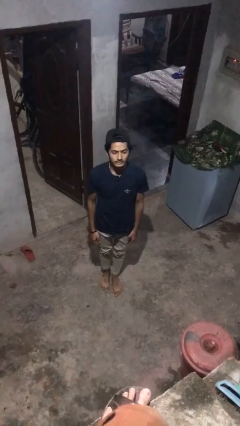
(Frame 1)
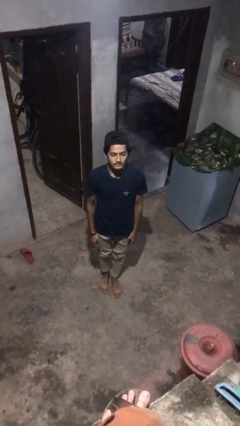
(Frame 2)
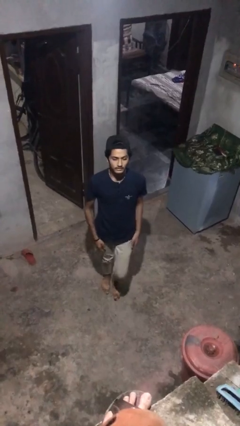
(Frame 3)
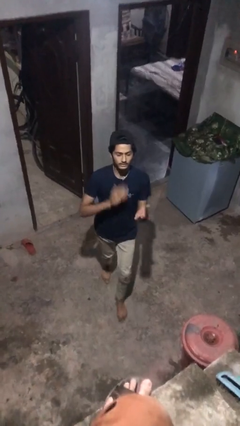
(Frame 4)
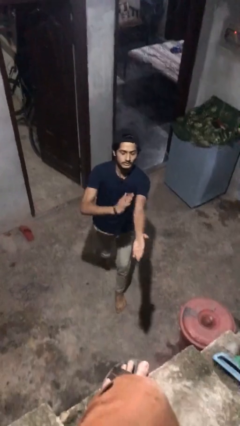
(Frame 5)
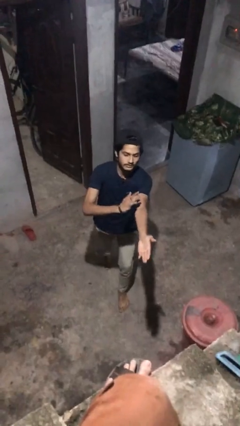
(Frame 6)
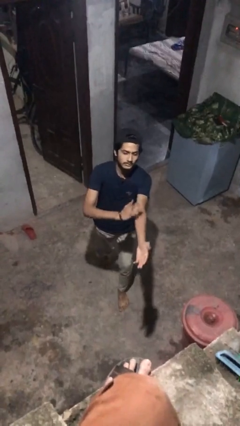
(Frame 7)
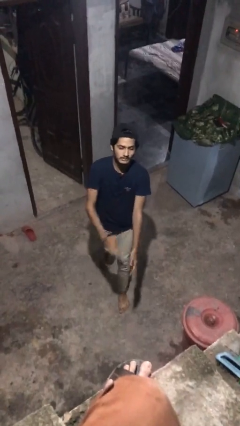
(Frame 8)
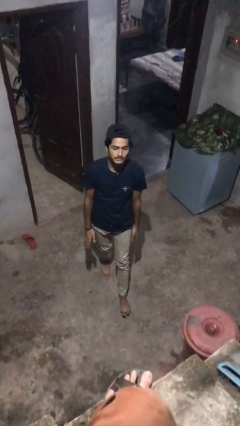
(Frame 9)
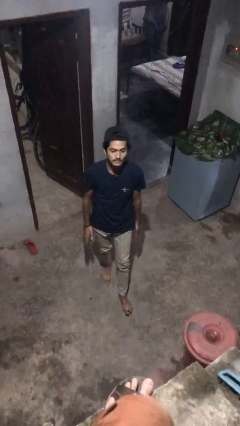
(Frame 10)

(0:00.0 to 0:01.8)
person karate chop

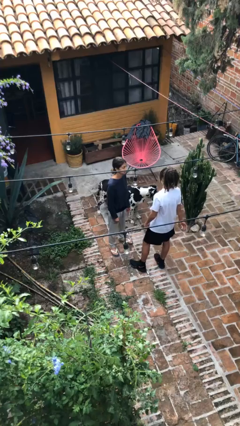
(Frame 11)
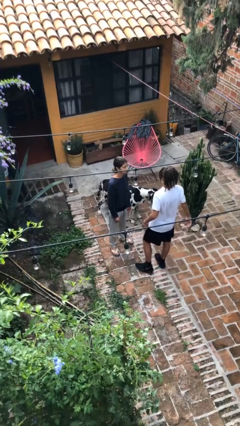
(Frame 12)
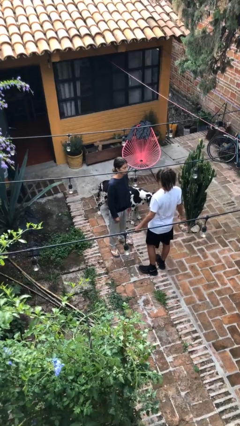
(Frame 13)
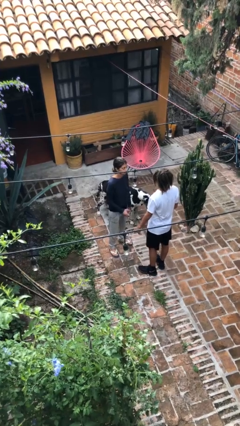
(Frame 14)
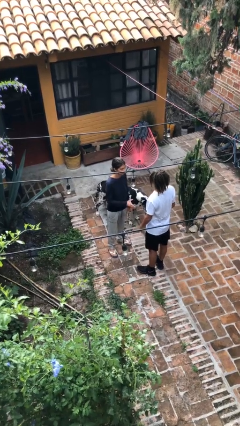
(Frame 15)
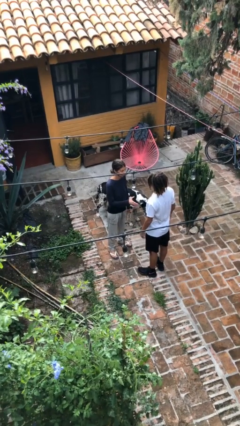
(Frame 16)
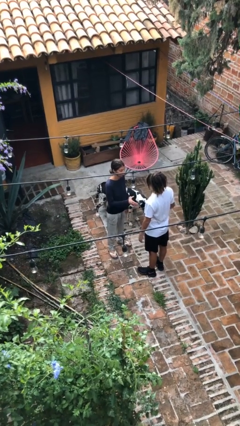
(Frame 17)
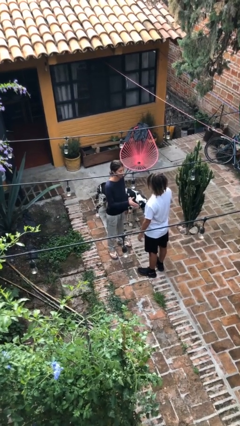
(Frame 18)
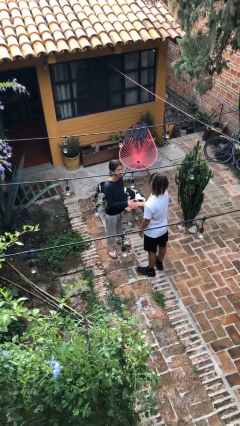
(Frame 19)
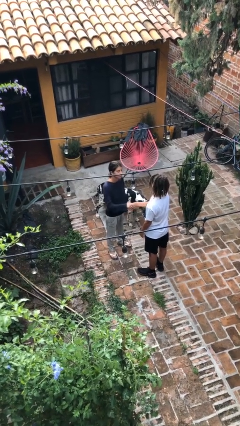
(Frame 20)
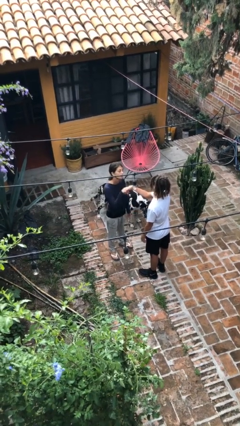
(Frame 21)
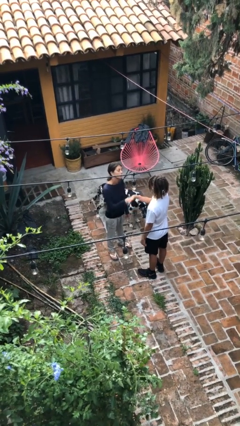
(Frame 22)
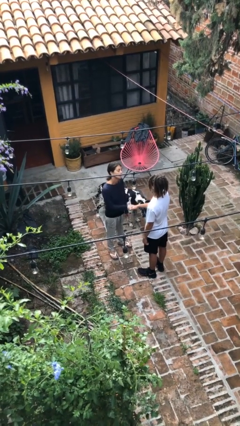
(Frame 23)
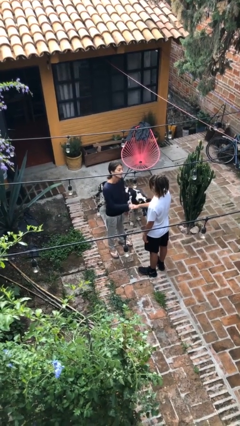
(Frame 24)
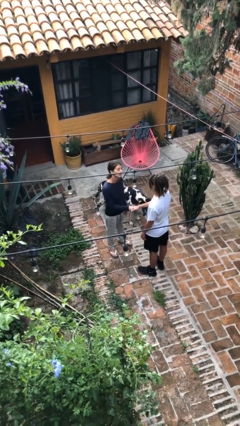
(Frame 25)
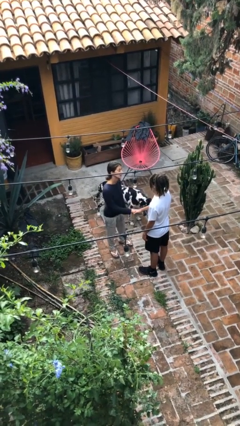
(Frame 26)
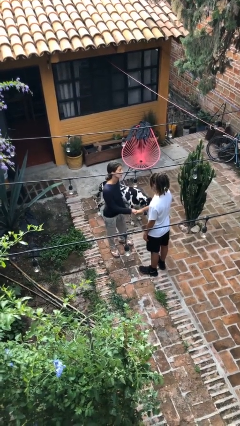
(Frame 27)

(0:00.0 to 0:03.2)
person shakes hand

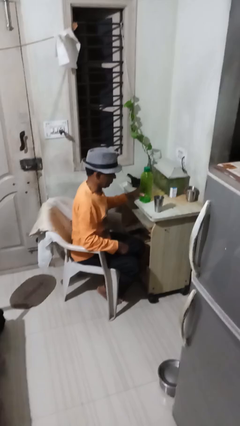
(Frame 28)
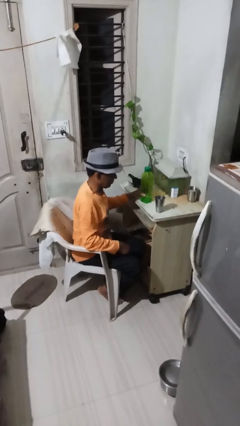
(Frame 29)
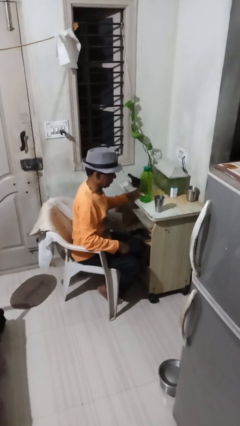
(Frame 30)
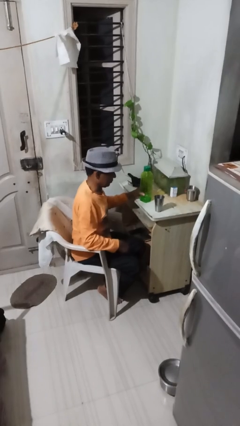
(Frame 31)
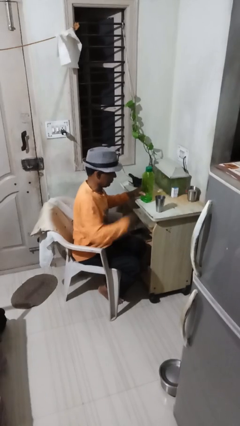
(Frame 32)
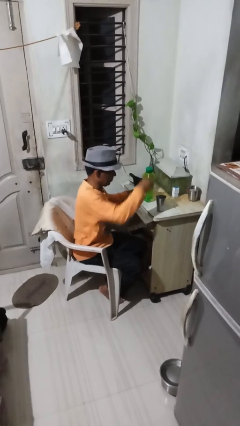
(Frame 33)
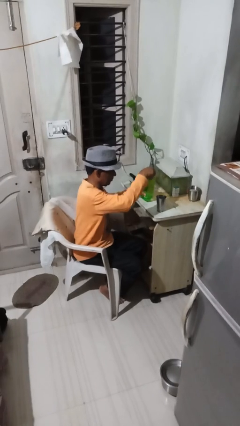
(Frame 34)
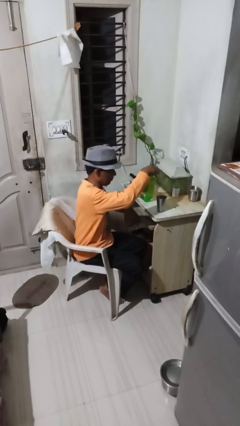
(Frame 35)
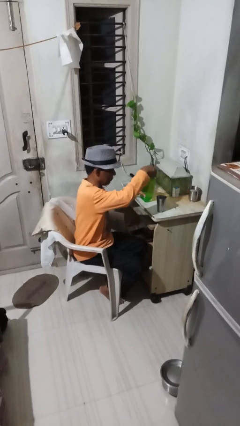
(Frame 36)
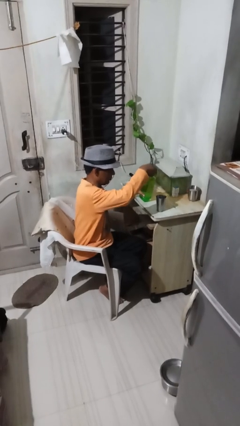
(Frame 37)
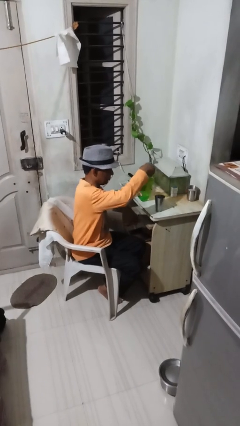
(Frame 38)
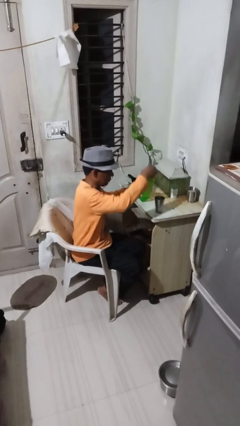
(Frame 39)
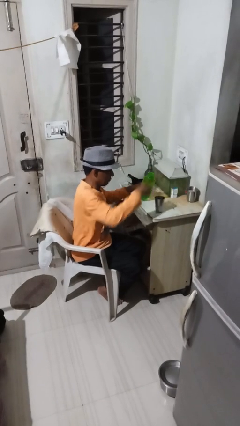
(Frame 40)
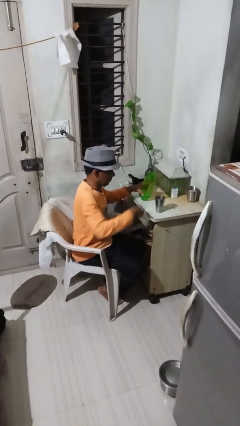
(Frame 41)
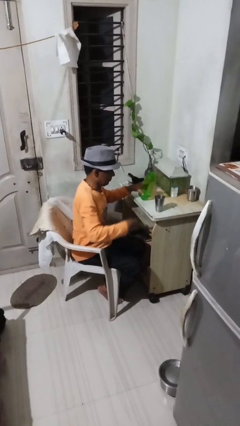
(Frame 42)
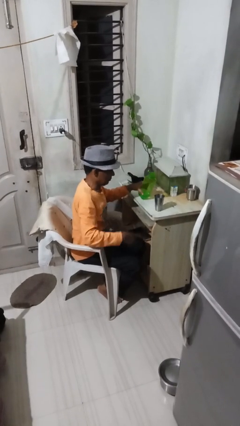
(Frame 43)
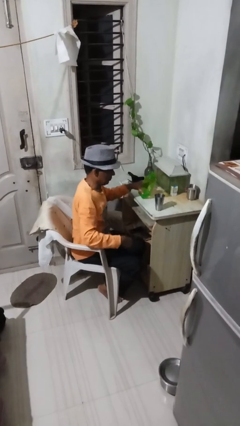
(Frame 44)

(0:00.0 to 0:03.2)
person unscrews lid from bottle

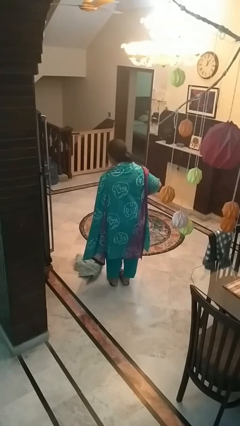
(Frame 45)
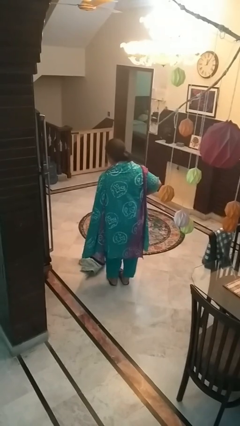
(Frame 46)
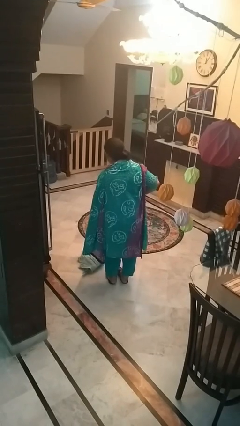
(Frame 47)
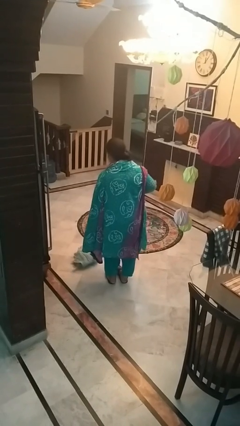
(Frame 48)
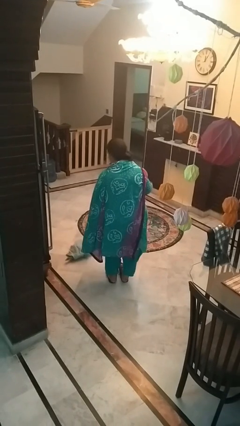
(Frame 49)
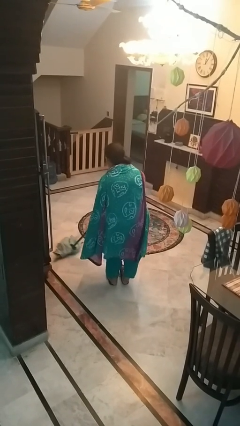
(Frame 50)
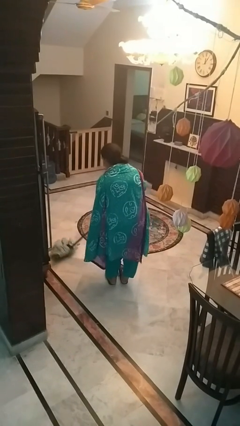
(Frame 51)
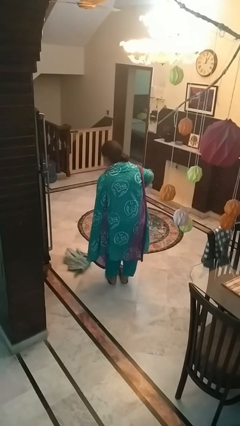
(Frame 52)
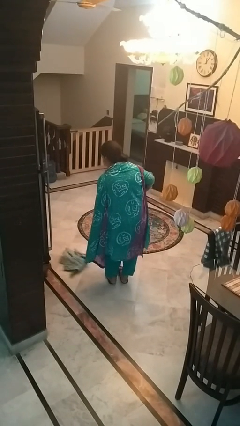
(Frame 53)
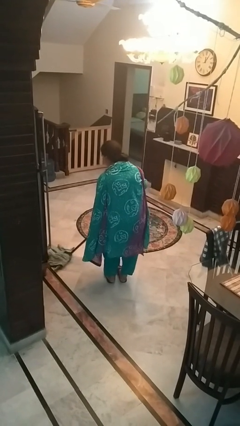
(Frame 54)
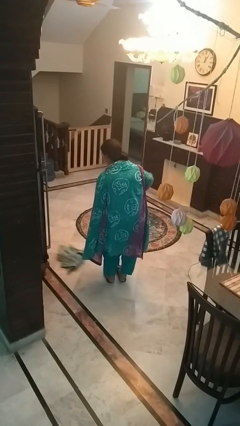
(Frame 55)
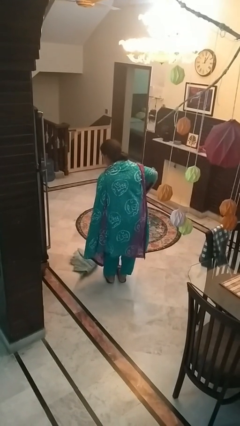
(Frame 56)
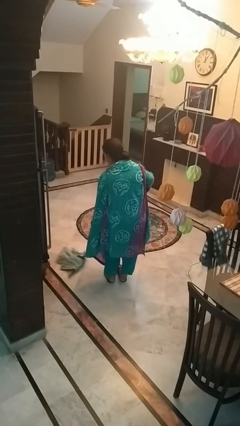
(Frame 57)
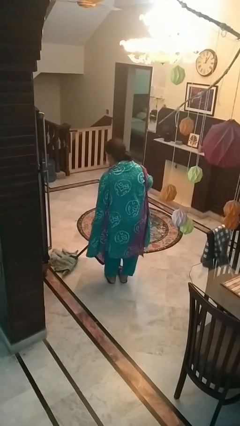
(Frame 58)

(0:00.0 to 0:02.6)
person mops

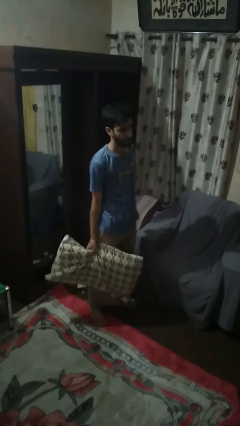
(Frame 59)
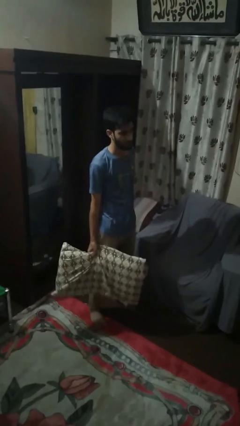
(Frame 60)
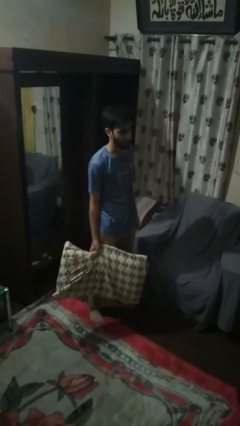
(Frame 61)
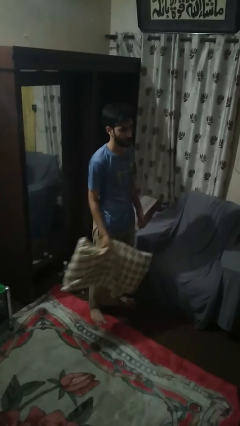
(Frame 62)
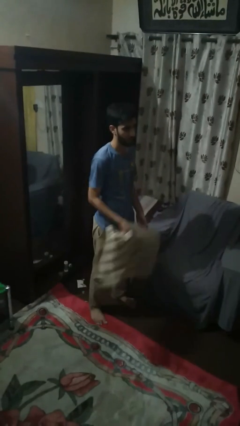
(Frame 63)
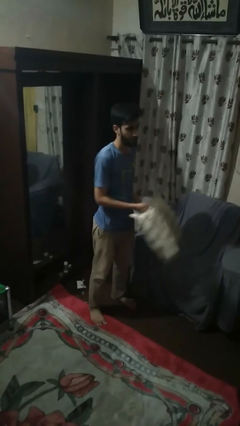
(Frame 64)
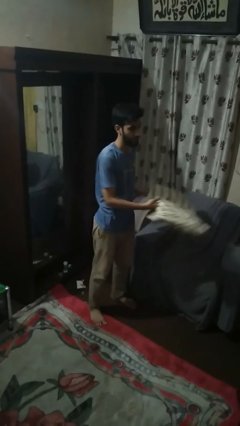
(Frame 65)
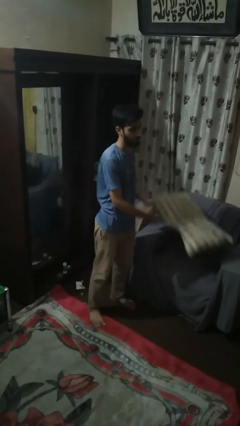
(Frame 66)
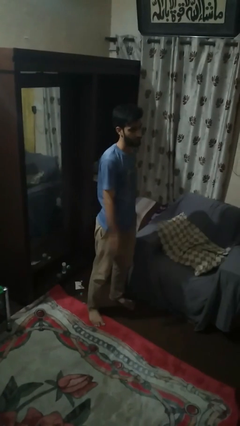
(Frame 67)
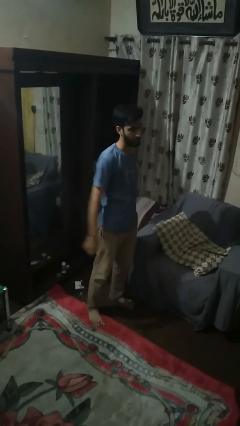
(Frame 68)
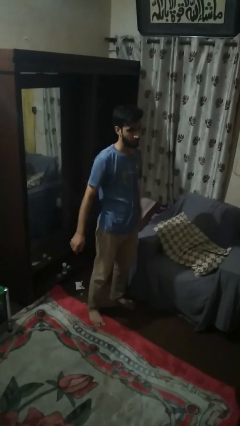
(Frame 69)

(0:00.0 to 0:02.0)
person puts down object on couch

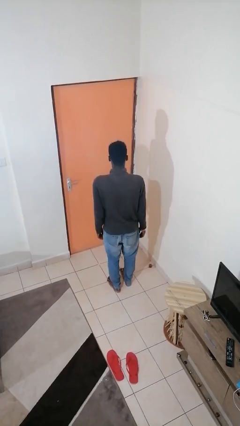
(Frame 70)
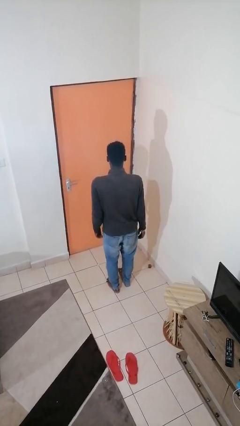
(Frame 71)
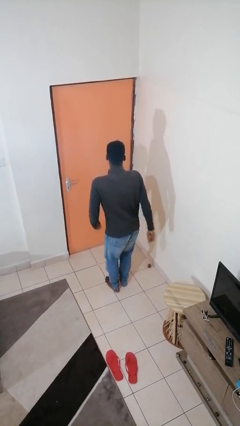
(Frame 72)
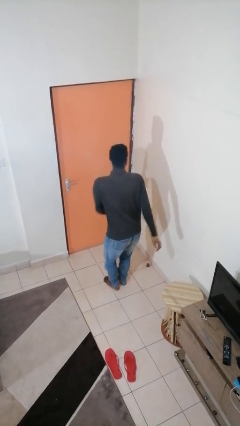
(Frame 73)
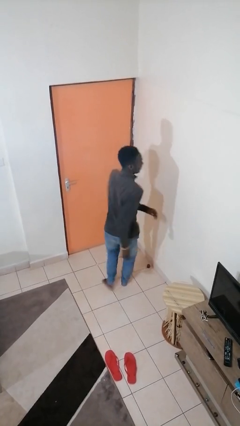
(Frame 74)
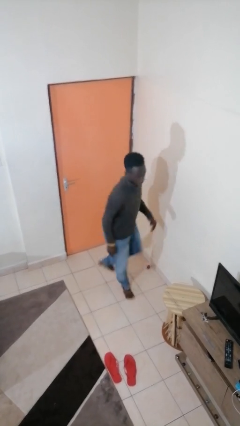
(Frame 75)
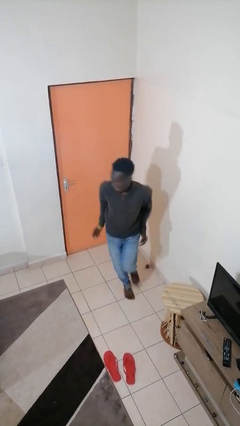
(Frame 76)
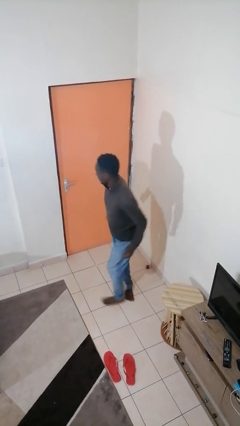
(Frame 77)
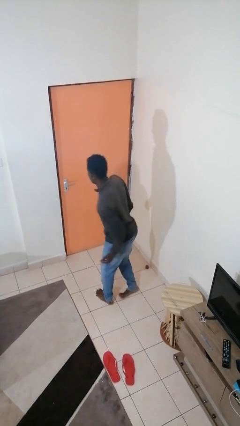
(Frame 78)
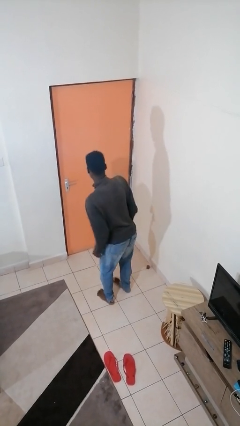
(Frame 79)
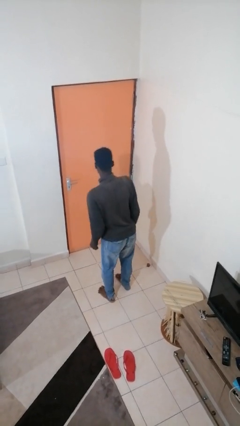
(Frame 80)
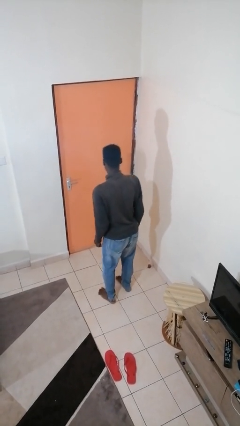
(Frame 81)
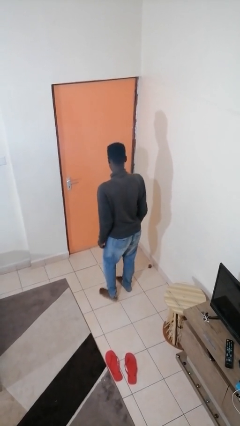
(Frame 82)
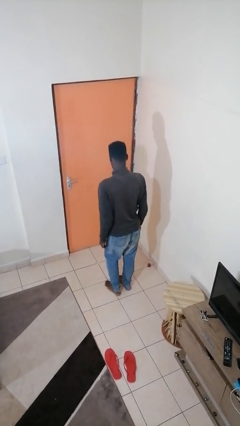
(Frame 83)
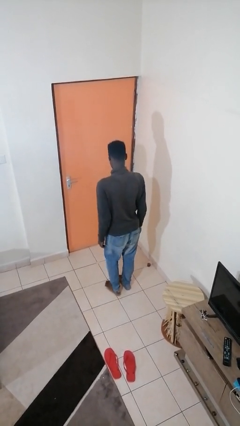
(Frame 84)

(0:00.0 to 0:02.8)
person twirls

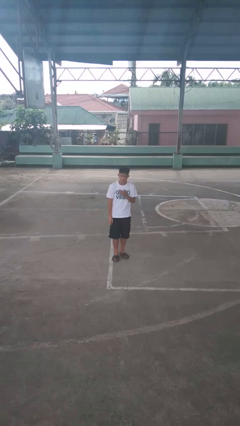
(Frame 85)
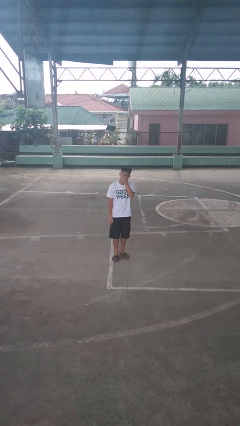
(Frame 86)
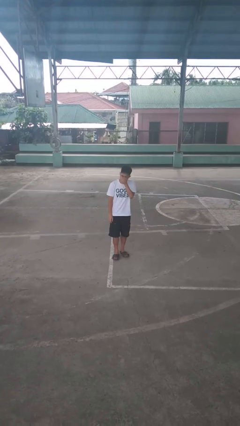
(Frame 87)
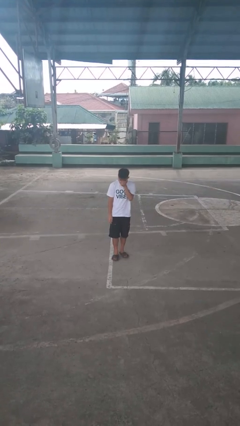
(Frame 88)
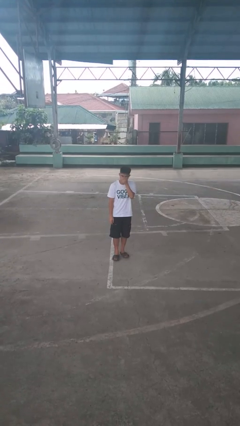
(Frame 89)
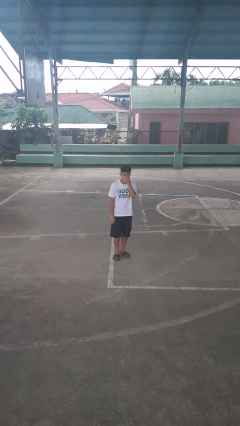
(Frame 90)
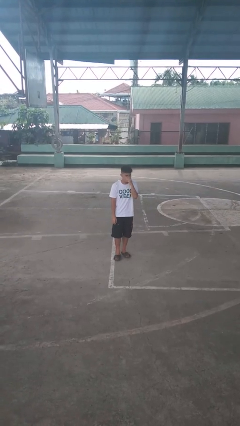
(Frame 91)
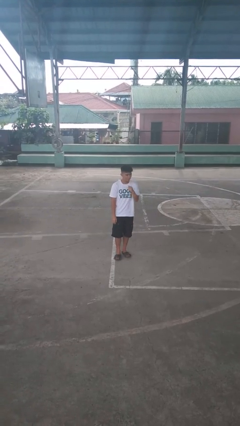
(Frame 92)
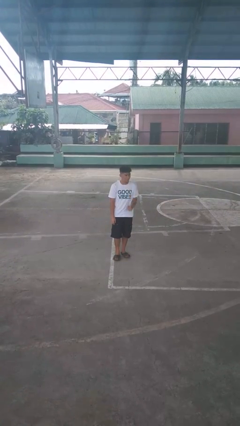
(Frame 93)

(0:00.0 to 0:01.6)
person sneezes into hand

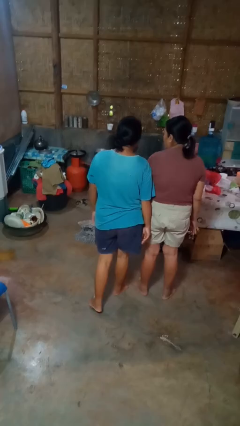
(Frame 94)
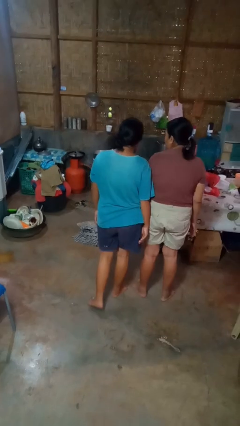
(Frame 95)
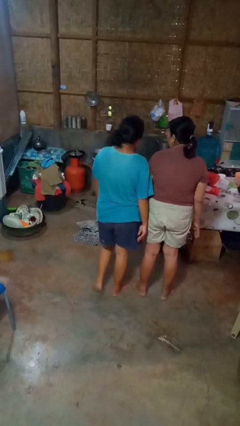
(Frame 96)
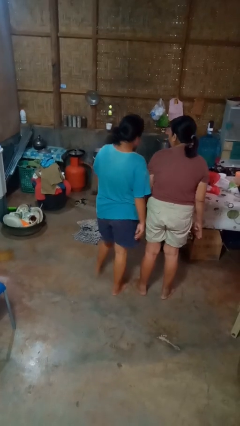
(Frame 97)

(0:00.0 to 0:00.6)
person bumps into person
